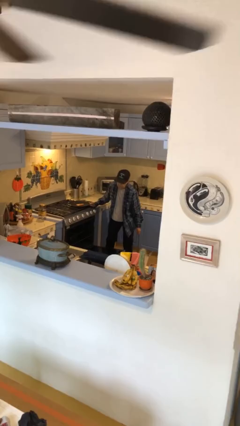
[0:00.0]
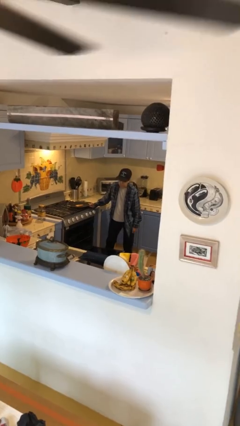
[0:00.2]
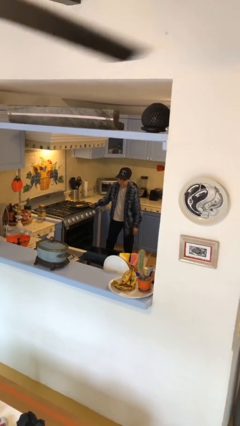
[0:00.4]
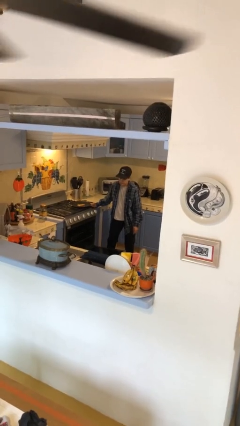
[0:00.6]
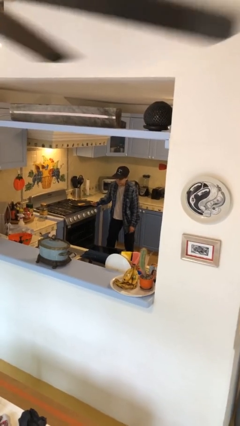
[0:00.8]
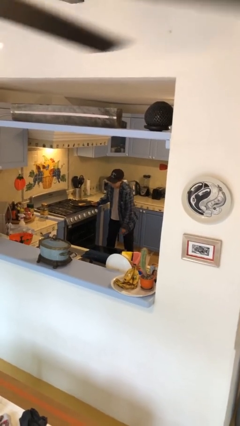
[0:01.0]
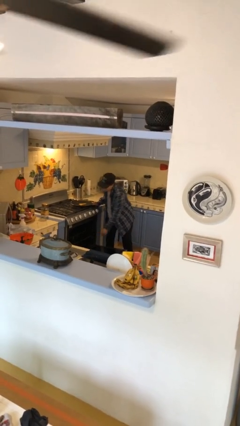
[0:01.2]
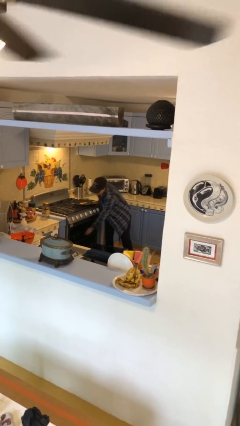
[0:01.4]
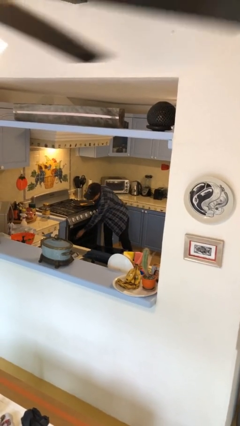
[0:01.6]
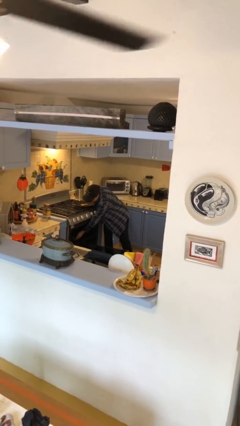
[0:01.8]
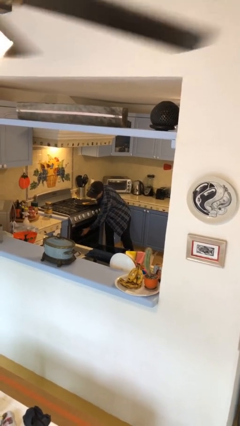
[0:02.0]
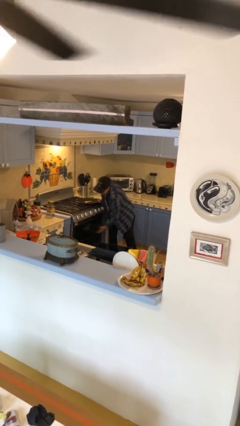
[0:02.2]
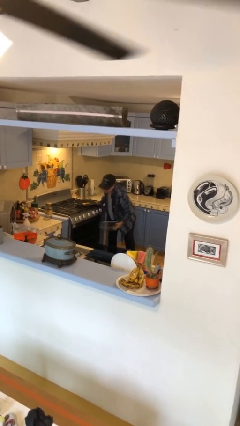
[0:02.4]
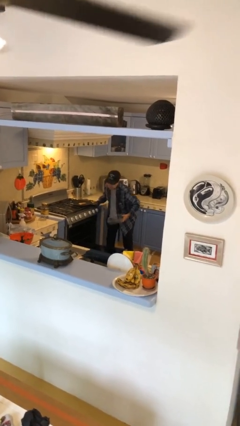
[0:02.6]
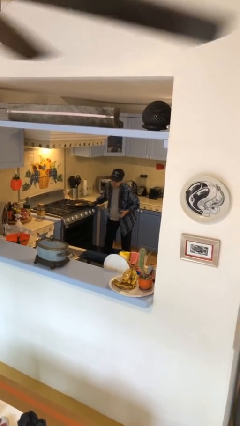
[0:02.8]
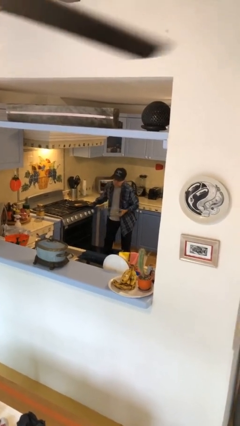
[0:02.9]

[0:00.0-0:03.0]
person takes object from oven

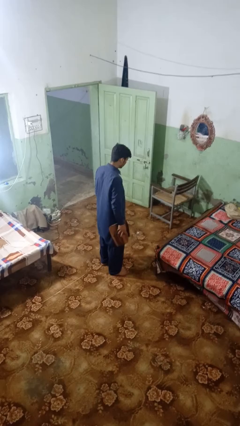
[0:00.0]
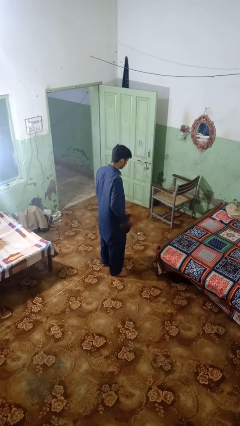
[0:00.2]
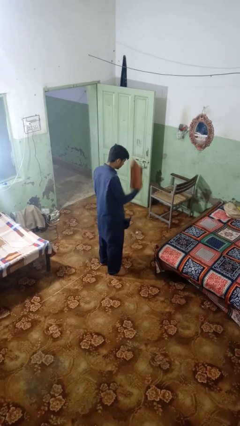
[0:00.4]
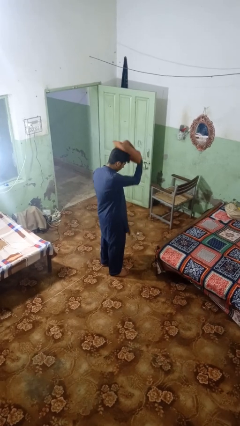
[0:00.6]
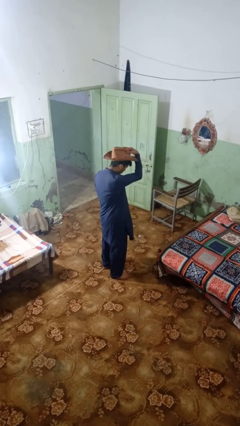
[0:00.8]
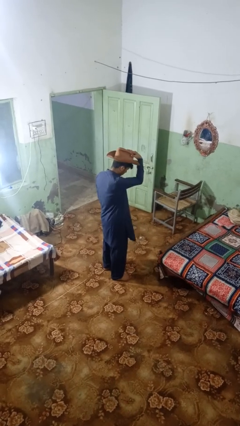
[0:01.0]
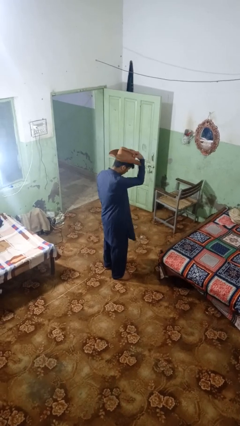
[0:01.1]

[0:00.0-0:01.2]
person puts on hat

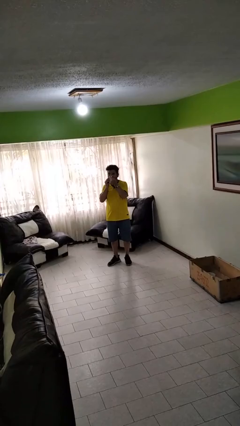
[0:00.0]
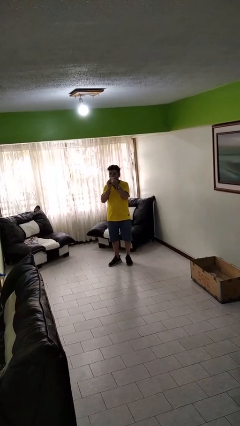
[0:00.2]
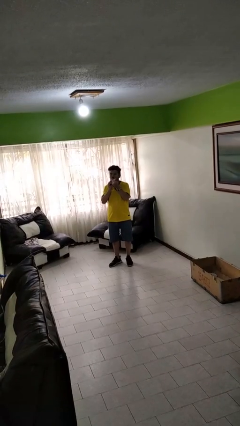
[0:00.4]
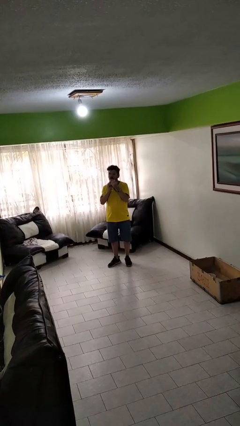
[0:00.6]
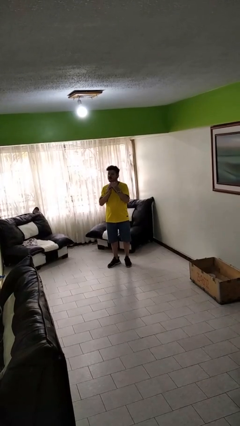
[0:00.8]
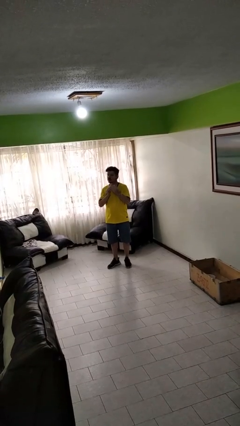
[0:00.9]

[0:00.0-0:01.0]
person wipes mouth with napkin

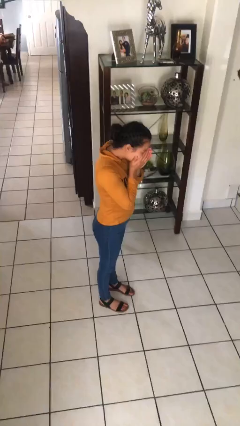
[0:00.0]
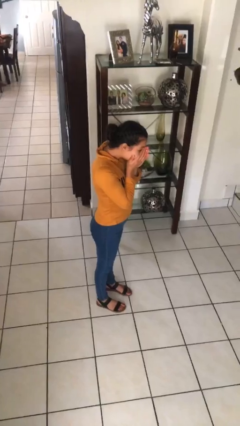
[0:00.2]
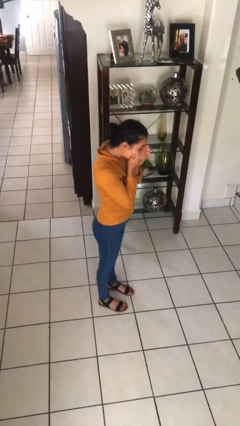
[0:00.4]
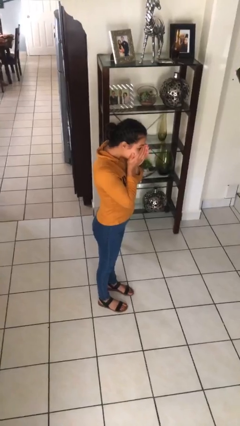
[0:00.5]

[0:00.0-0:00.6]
person sneezes into hand

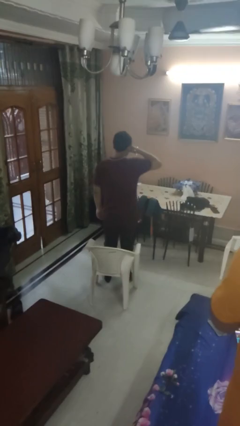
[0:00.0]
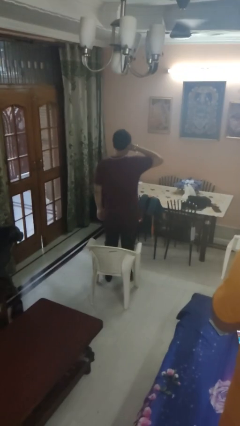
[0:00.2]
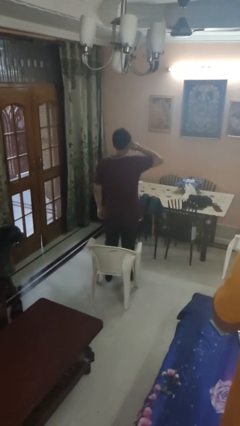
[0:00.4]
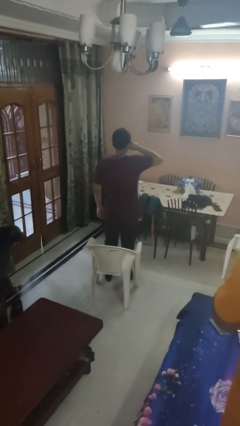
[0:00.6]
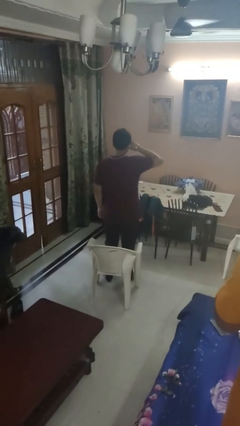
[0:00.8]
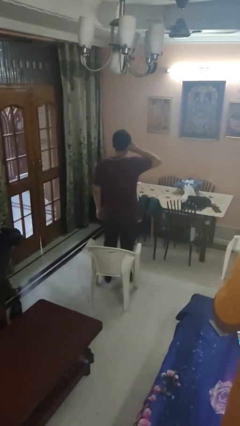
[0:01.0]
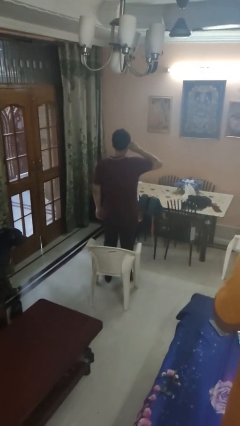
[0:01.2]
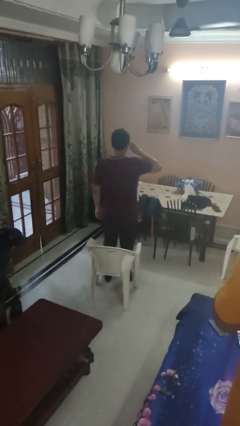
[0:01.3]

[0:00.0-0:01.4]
person rubs eyes

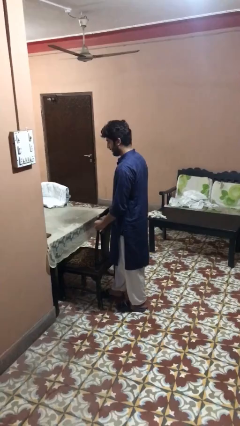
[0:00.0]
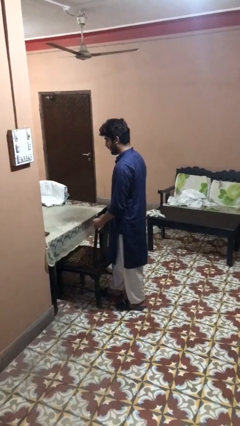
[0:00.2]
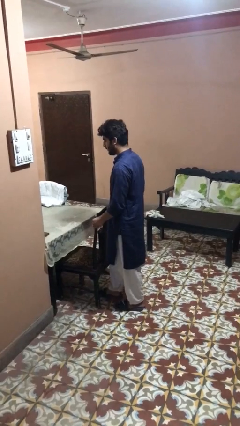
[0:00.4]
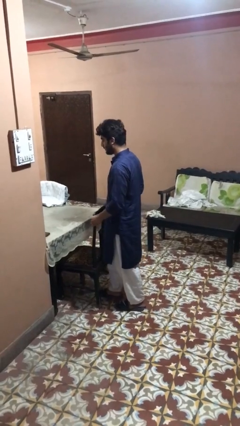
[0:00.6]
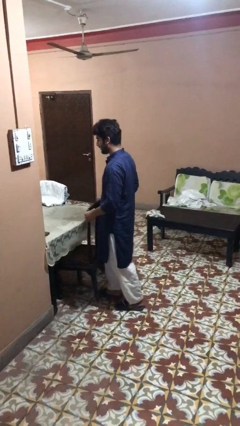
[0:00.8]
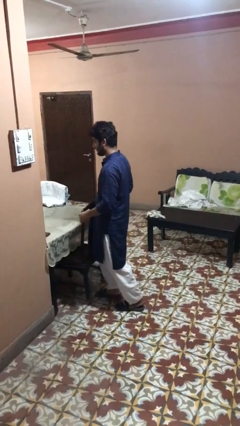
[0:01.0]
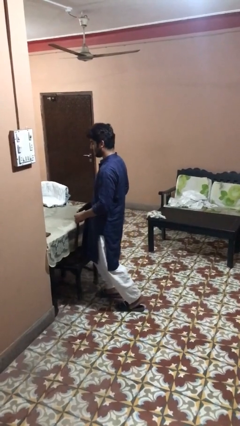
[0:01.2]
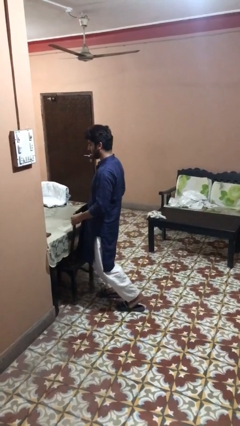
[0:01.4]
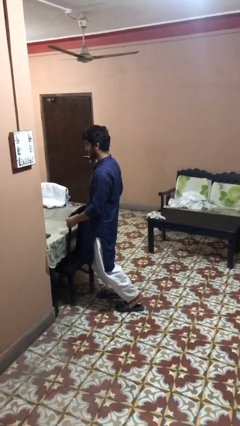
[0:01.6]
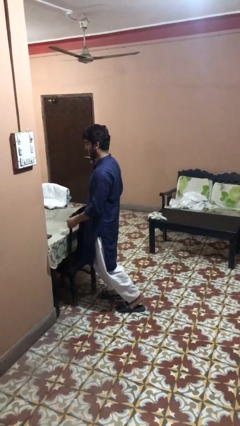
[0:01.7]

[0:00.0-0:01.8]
person pushes in chair

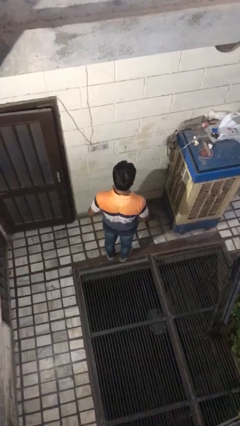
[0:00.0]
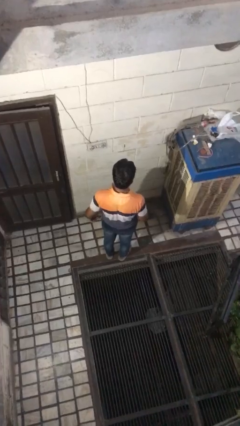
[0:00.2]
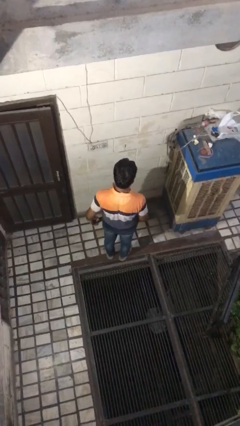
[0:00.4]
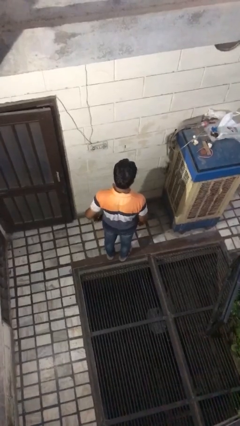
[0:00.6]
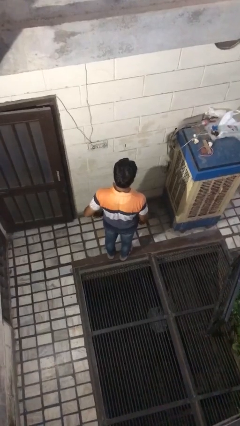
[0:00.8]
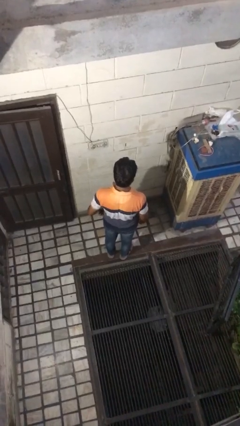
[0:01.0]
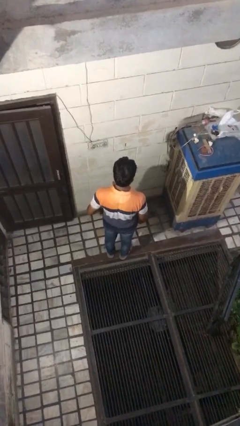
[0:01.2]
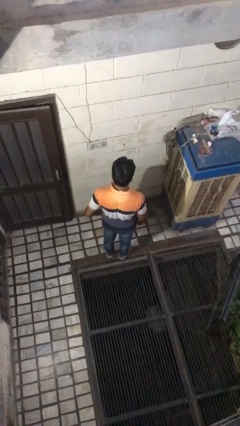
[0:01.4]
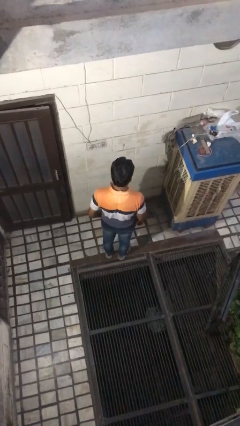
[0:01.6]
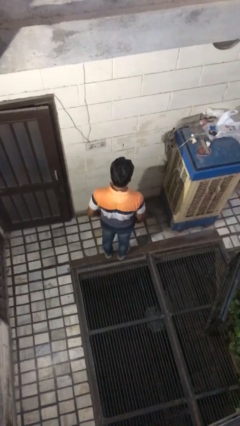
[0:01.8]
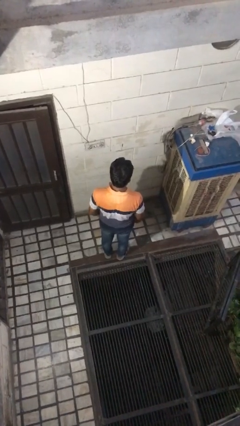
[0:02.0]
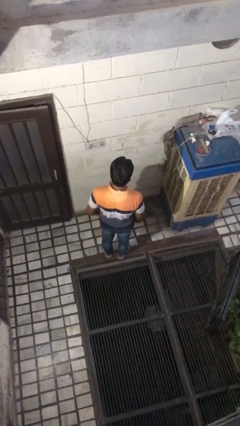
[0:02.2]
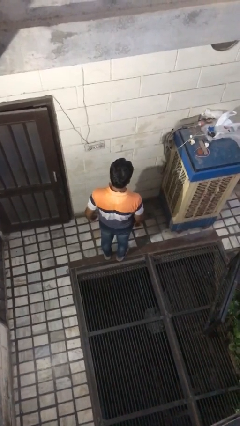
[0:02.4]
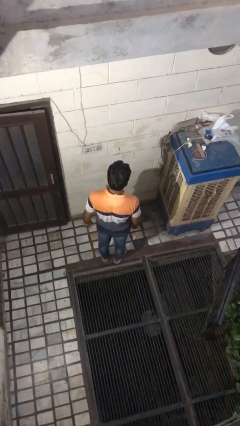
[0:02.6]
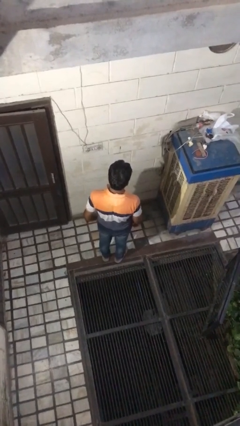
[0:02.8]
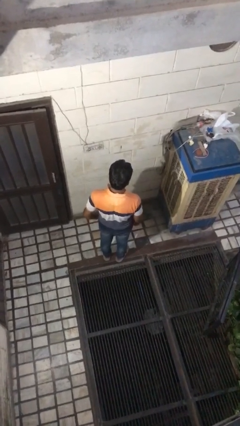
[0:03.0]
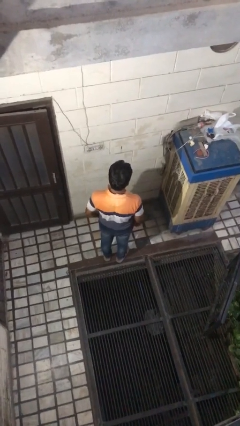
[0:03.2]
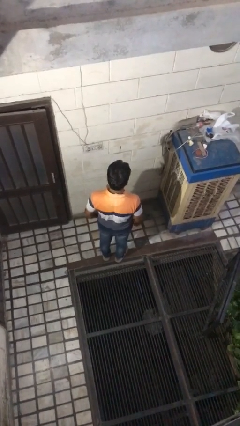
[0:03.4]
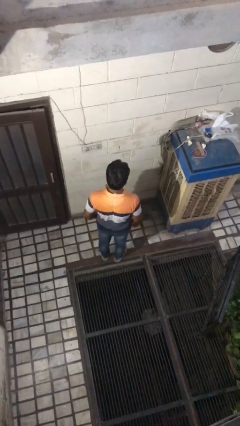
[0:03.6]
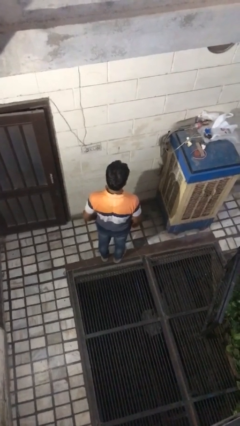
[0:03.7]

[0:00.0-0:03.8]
person puts phone into pocket

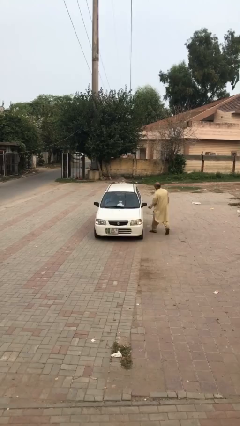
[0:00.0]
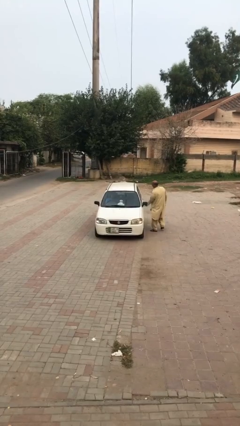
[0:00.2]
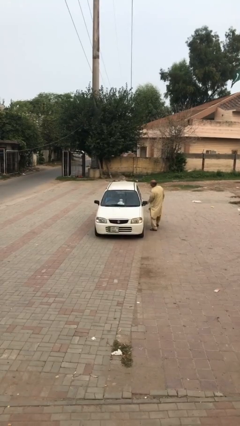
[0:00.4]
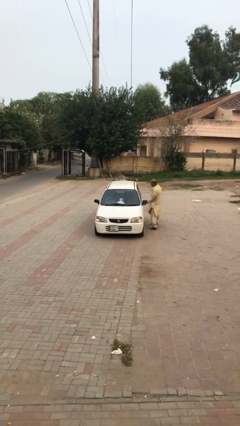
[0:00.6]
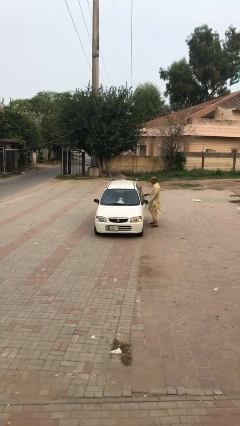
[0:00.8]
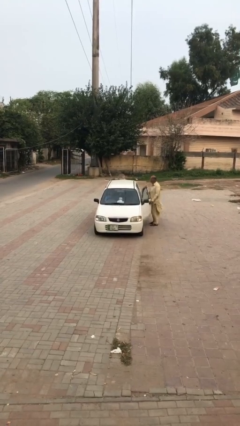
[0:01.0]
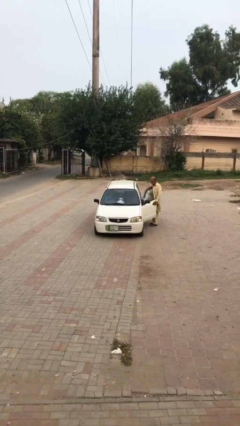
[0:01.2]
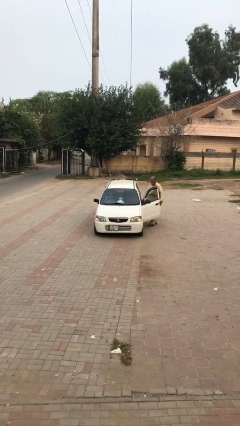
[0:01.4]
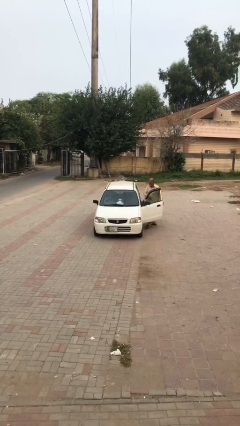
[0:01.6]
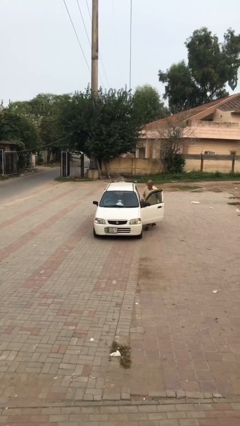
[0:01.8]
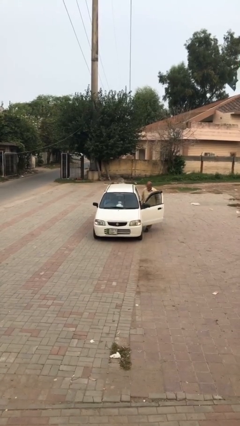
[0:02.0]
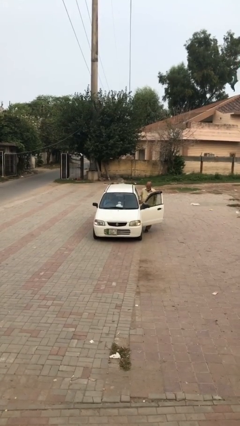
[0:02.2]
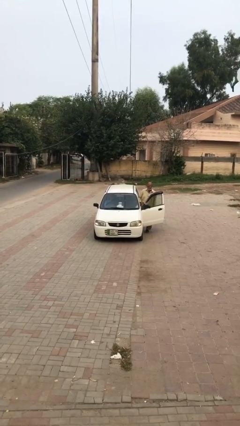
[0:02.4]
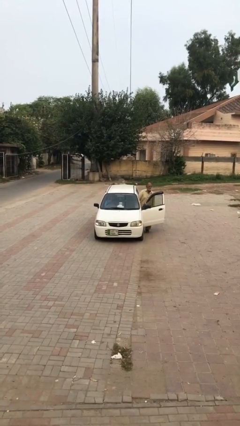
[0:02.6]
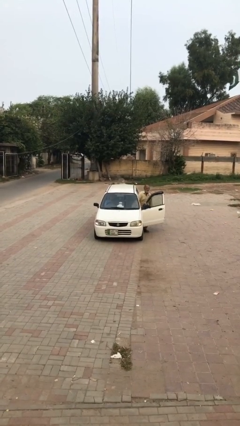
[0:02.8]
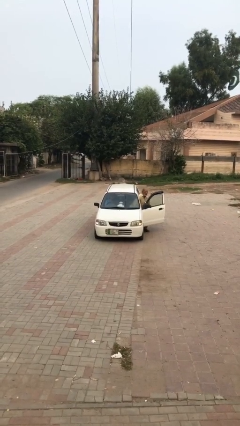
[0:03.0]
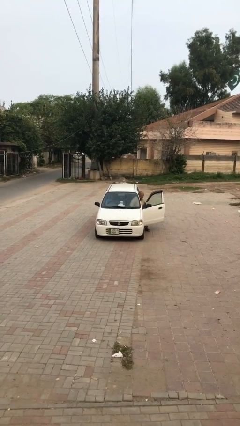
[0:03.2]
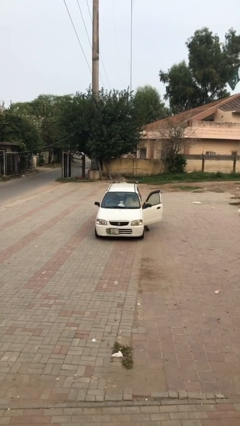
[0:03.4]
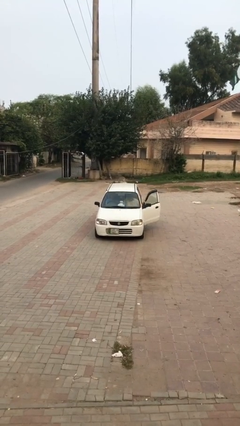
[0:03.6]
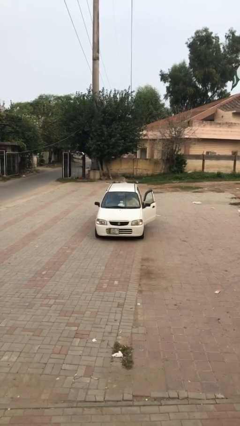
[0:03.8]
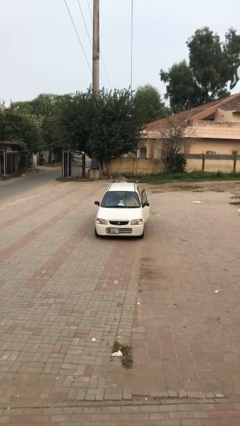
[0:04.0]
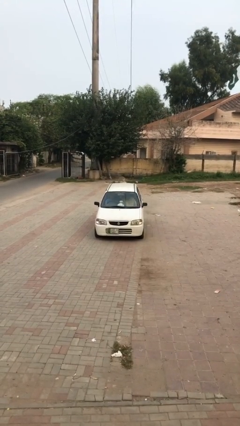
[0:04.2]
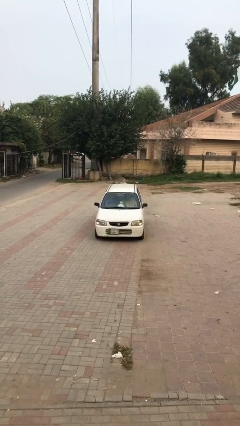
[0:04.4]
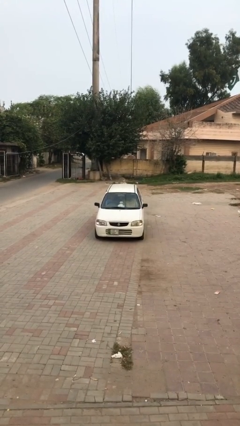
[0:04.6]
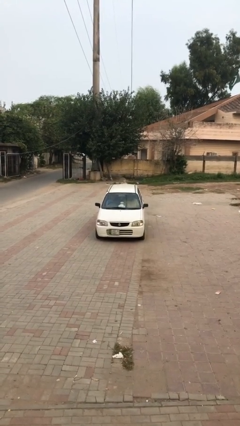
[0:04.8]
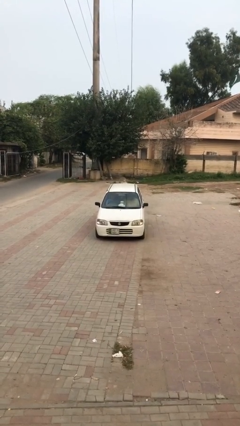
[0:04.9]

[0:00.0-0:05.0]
car picks up person
